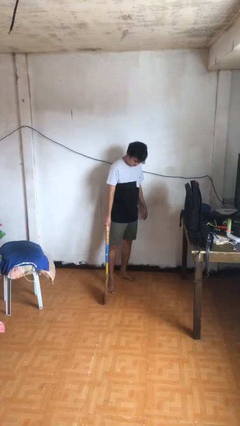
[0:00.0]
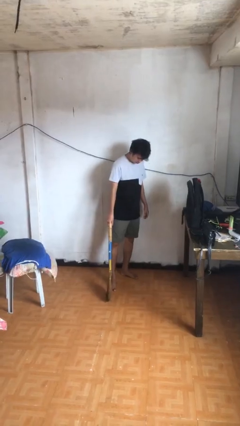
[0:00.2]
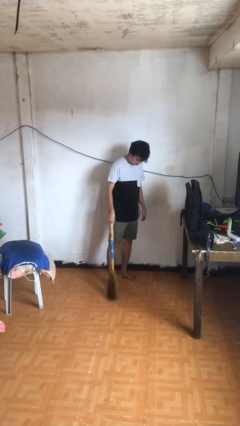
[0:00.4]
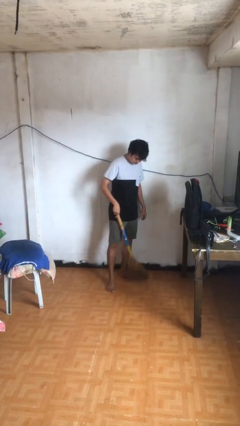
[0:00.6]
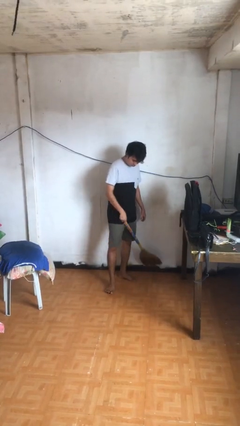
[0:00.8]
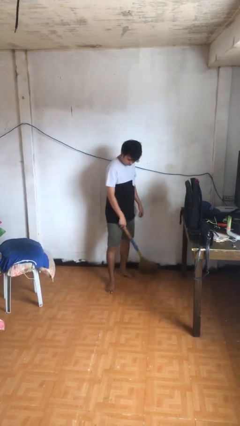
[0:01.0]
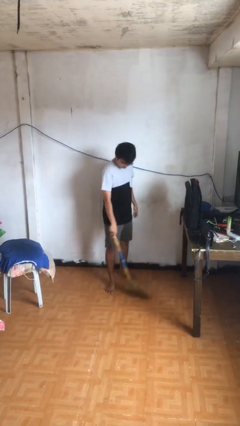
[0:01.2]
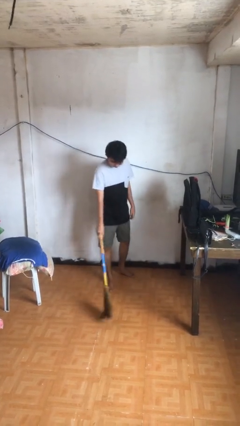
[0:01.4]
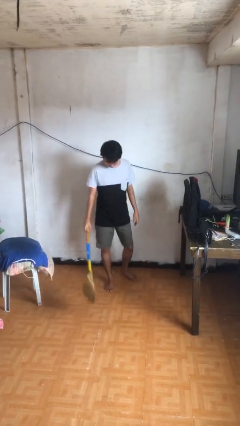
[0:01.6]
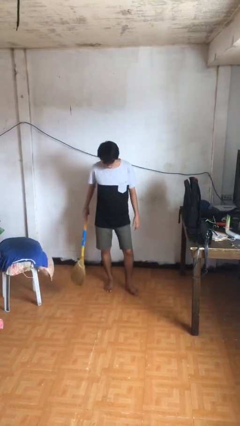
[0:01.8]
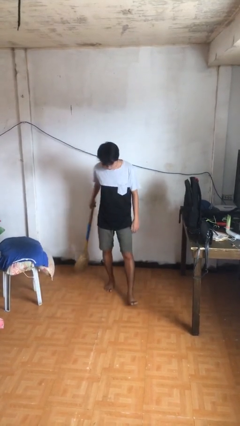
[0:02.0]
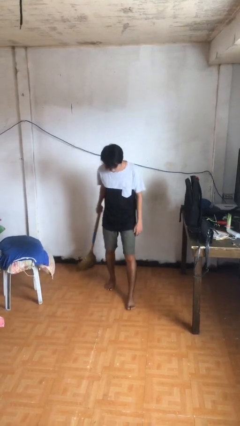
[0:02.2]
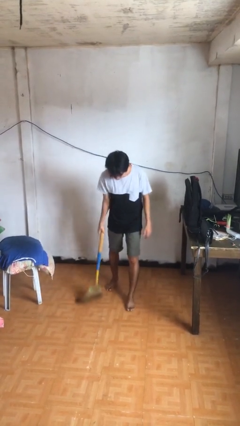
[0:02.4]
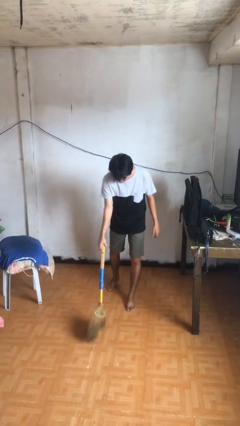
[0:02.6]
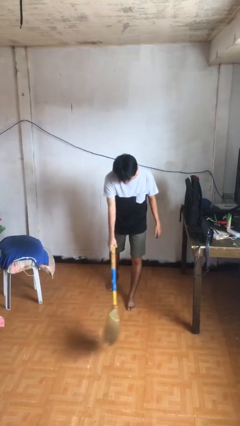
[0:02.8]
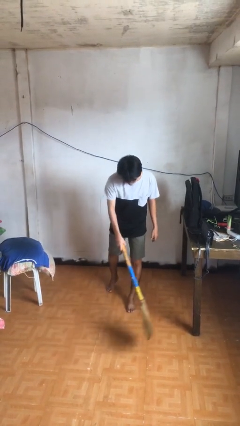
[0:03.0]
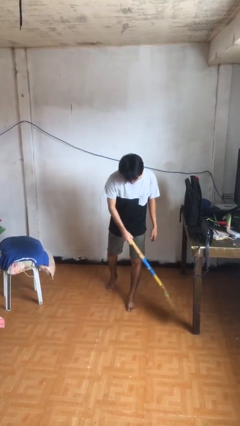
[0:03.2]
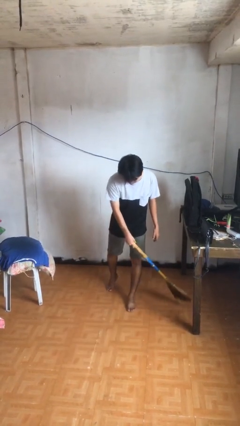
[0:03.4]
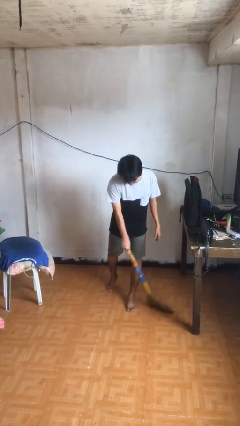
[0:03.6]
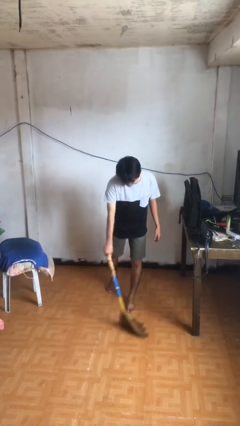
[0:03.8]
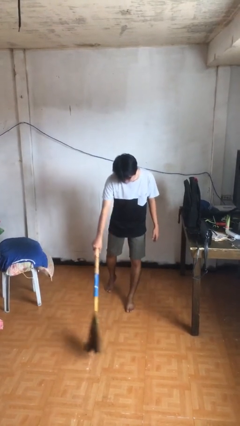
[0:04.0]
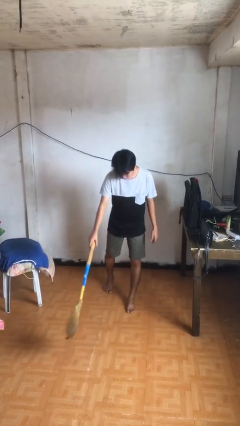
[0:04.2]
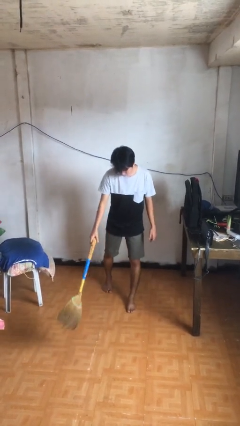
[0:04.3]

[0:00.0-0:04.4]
person sweeps floor

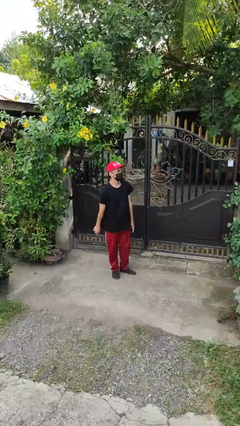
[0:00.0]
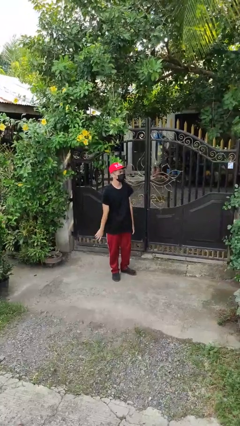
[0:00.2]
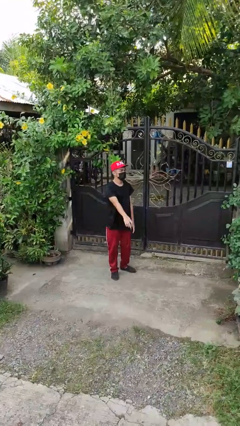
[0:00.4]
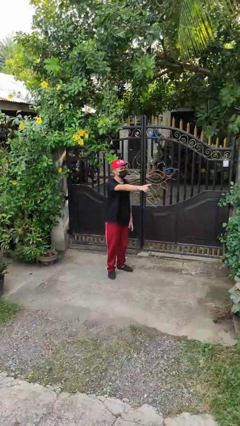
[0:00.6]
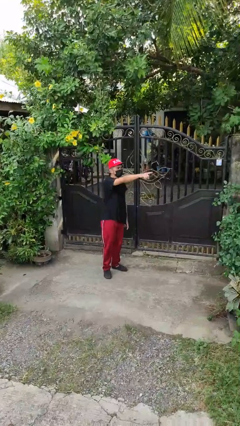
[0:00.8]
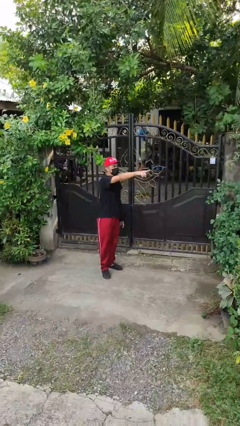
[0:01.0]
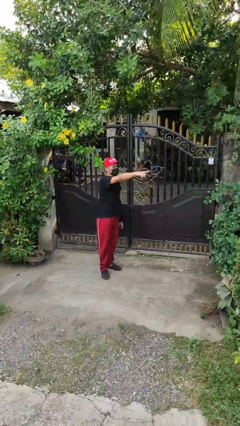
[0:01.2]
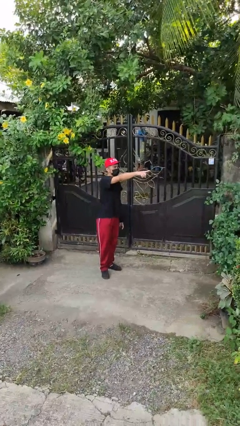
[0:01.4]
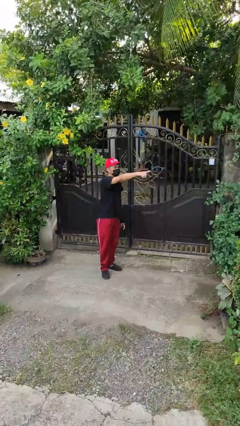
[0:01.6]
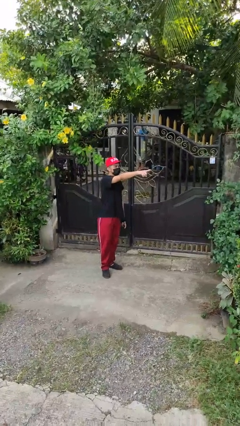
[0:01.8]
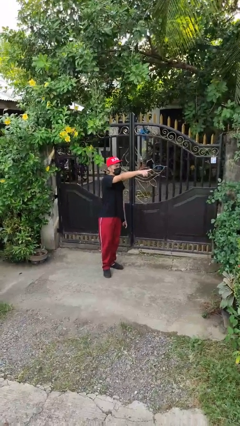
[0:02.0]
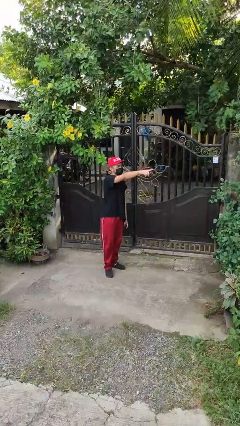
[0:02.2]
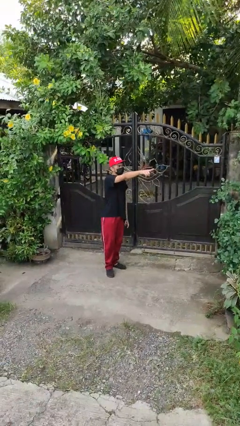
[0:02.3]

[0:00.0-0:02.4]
person points at person

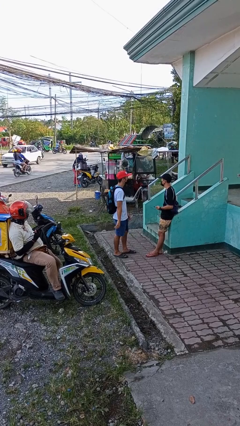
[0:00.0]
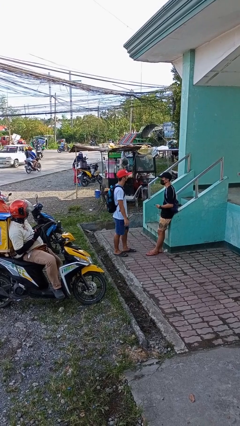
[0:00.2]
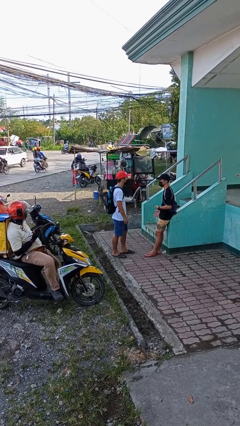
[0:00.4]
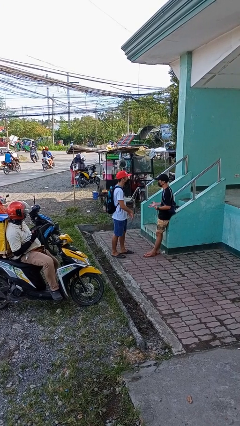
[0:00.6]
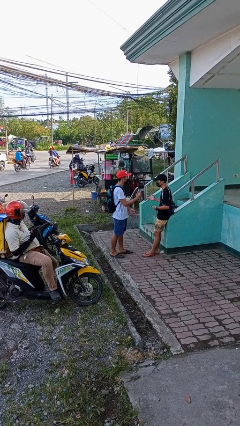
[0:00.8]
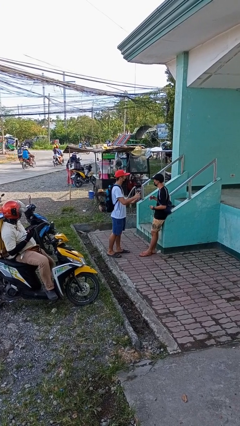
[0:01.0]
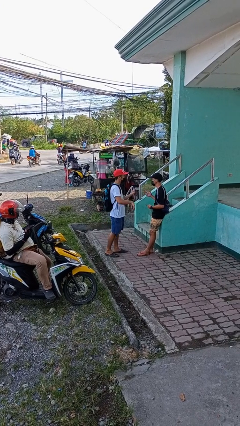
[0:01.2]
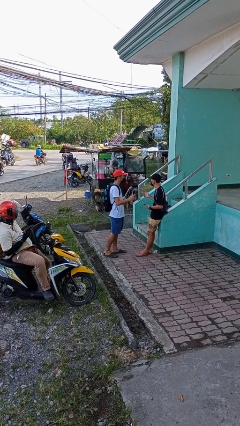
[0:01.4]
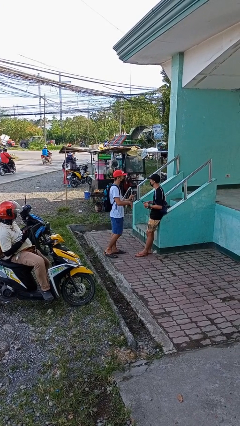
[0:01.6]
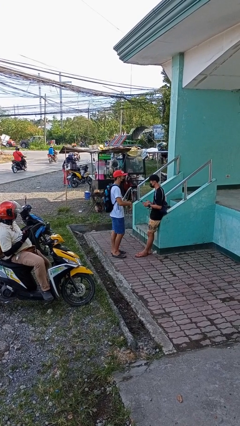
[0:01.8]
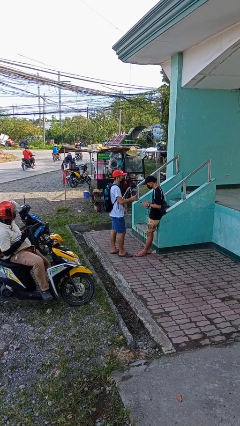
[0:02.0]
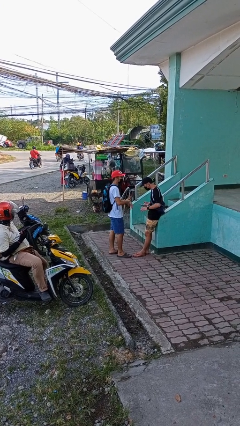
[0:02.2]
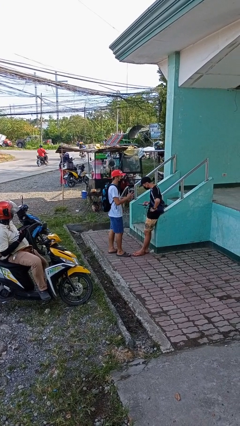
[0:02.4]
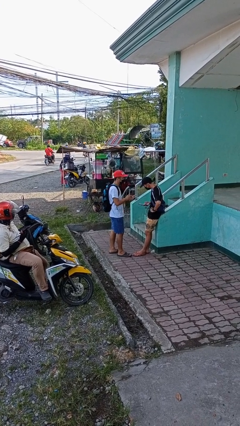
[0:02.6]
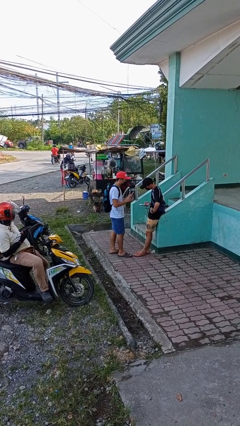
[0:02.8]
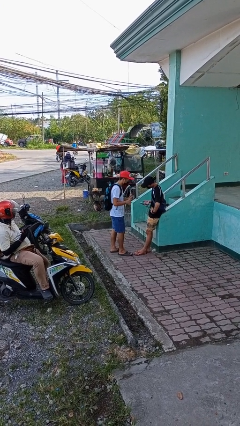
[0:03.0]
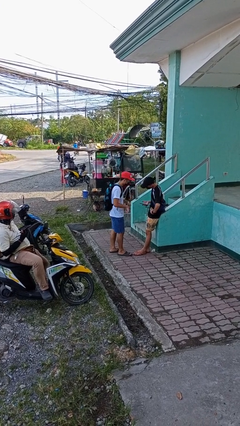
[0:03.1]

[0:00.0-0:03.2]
person talks to person

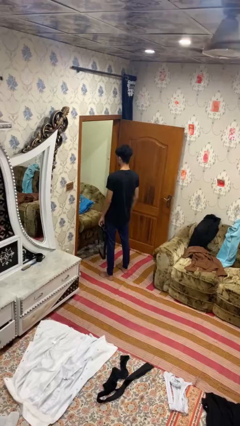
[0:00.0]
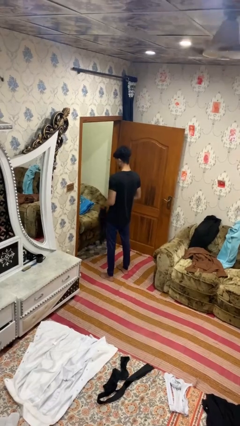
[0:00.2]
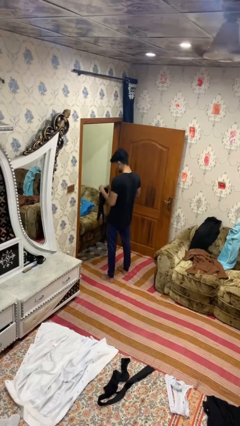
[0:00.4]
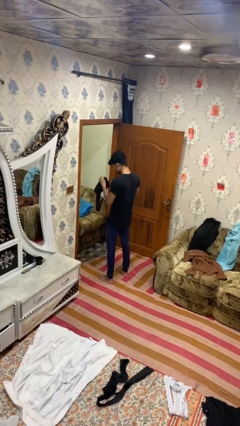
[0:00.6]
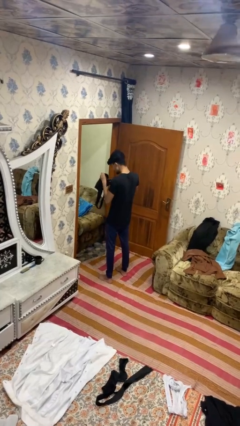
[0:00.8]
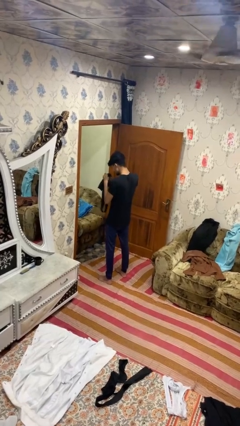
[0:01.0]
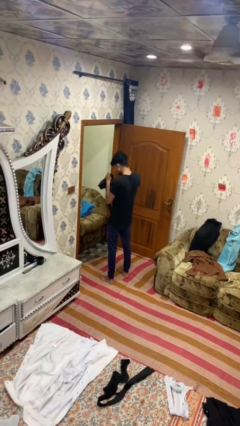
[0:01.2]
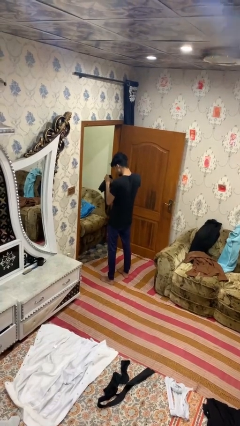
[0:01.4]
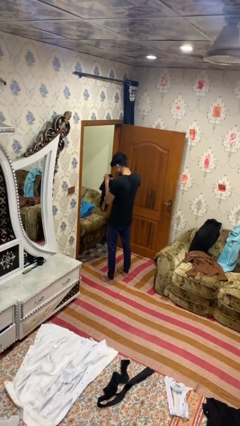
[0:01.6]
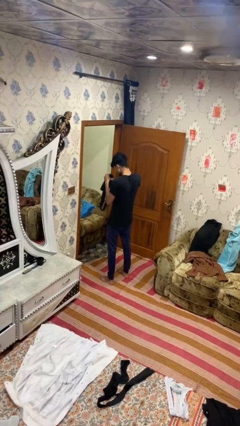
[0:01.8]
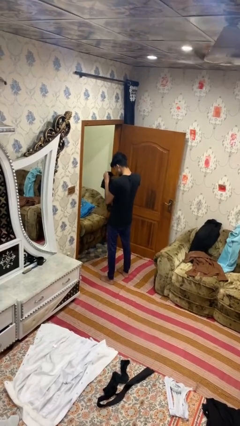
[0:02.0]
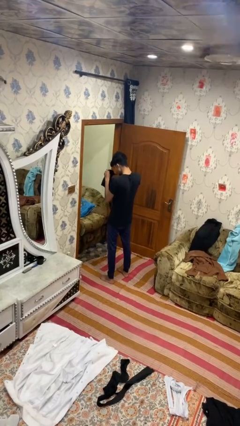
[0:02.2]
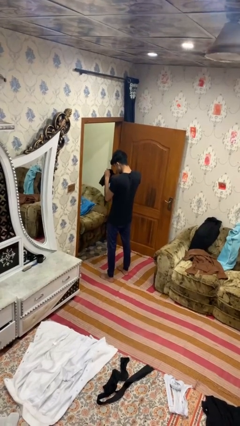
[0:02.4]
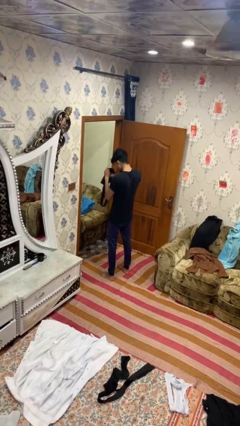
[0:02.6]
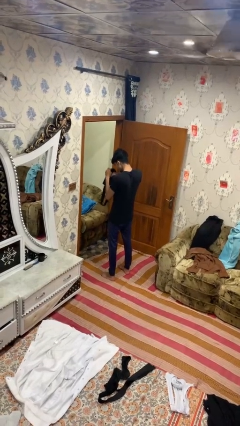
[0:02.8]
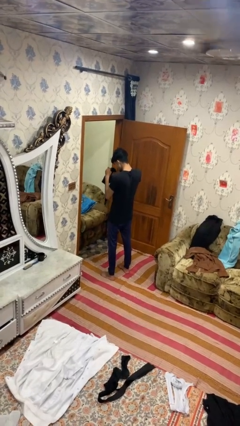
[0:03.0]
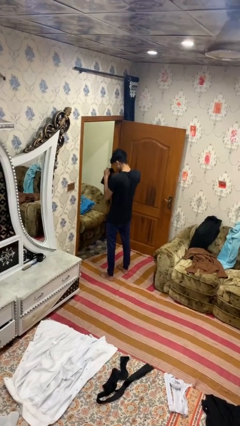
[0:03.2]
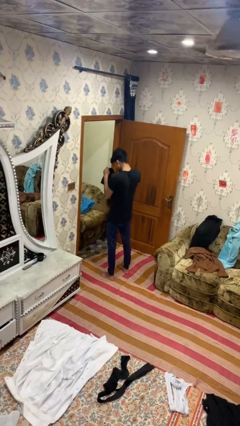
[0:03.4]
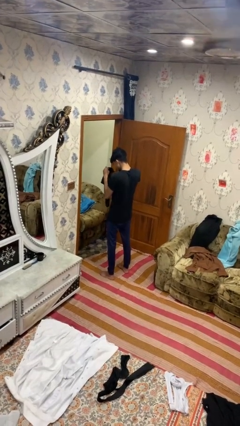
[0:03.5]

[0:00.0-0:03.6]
person searches in bag

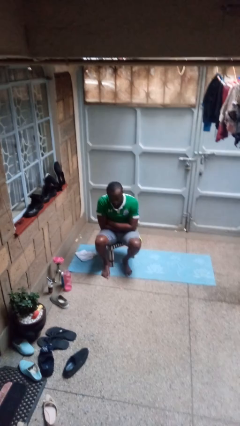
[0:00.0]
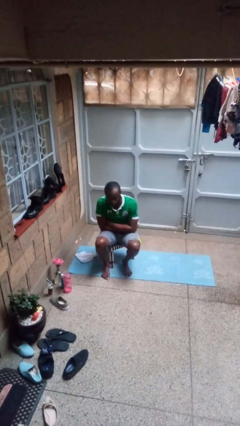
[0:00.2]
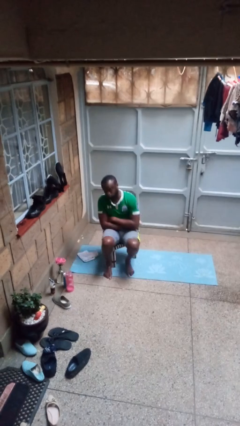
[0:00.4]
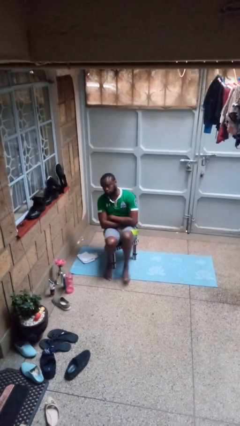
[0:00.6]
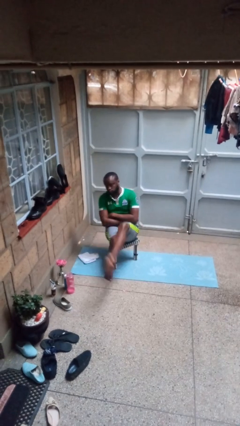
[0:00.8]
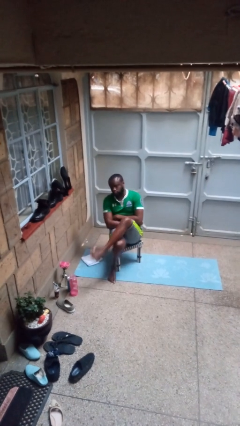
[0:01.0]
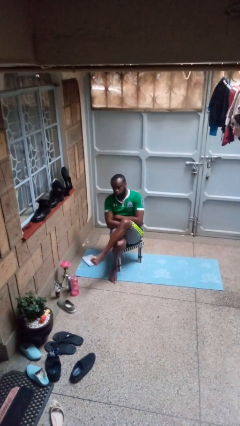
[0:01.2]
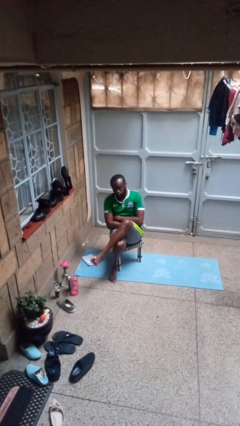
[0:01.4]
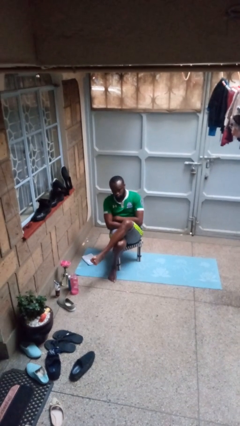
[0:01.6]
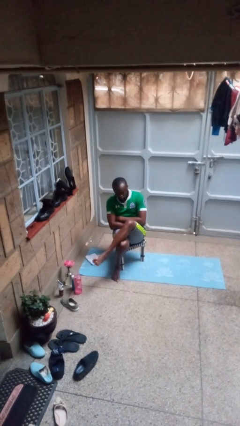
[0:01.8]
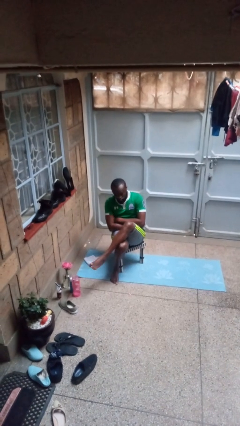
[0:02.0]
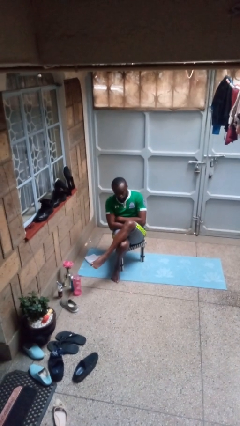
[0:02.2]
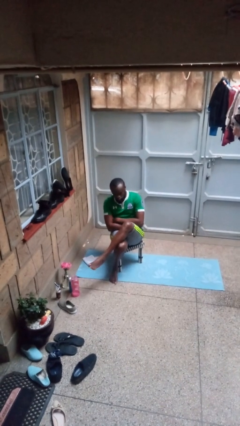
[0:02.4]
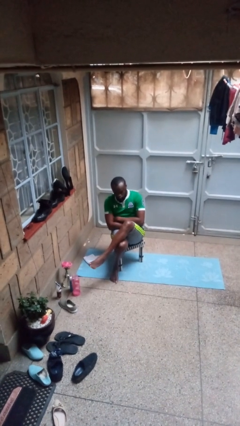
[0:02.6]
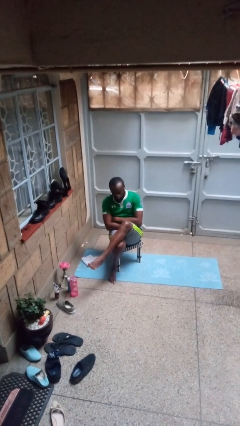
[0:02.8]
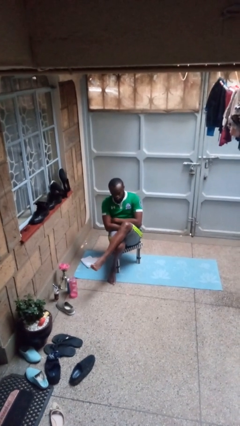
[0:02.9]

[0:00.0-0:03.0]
person crosses legs

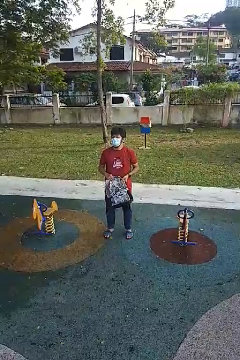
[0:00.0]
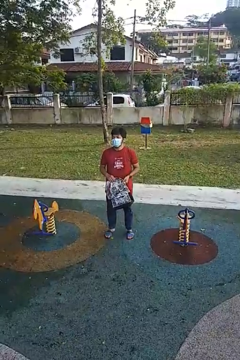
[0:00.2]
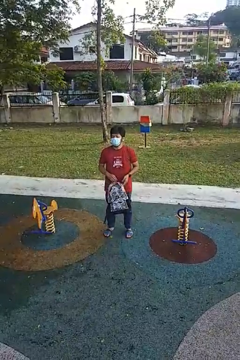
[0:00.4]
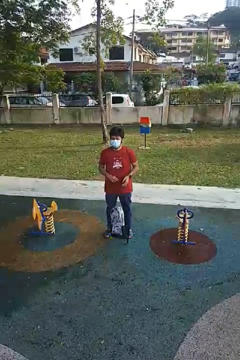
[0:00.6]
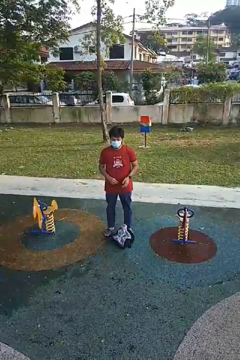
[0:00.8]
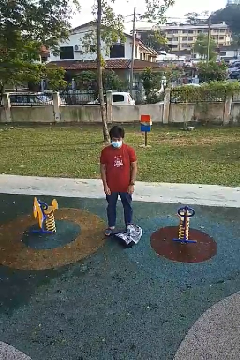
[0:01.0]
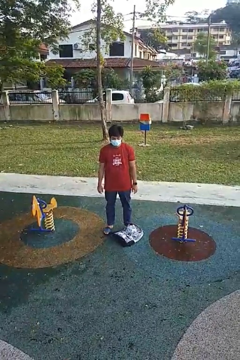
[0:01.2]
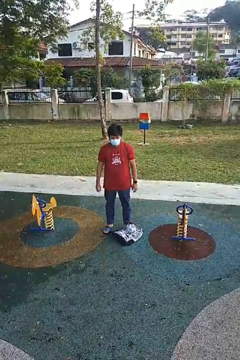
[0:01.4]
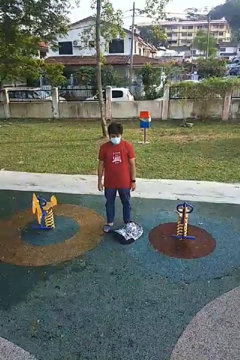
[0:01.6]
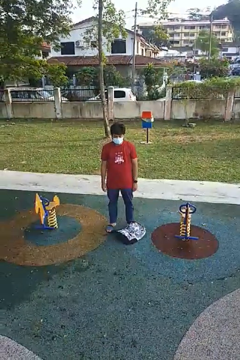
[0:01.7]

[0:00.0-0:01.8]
person drops object
